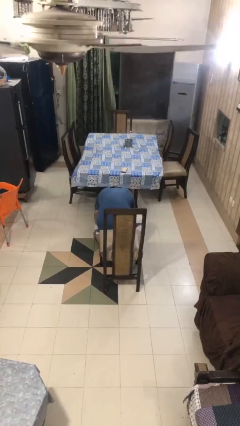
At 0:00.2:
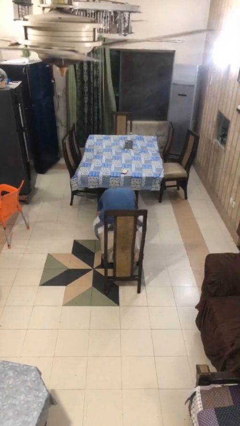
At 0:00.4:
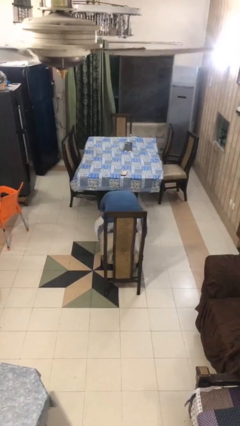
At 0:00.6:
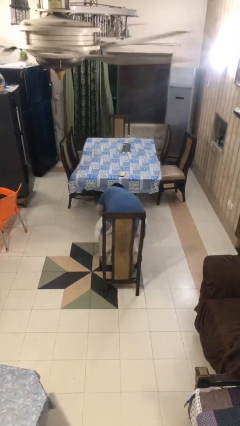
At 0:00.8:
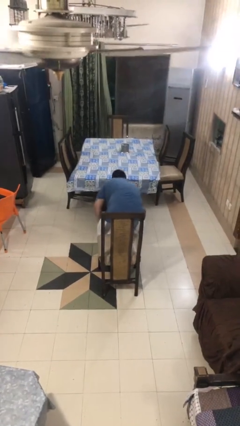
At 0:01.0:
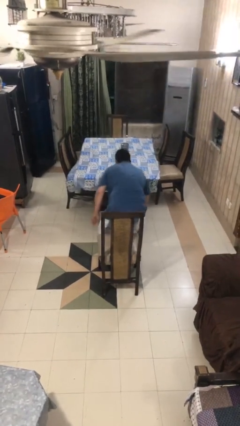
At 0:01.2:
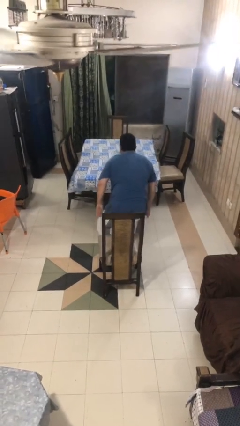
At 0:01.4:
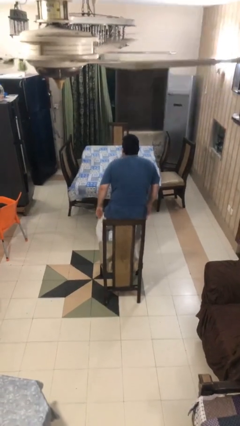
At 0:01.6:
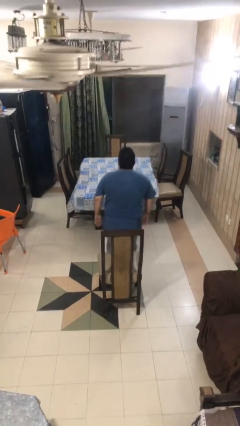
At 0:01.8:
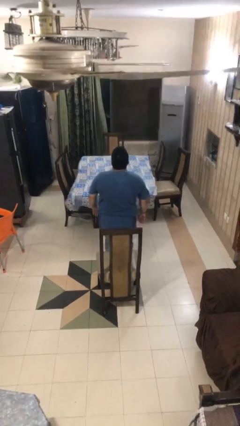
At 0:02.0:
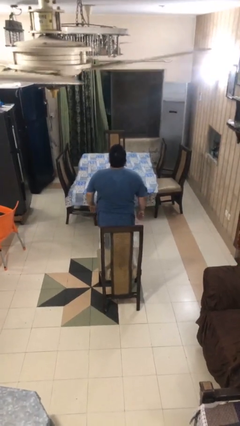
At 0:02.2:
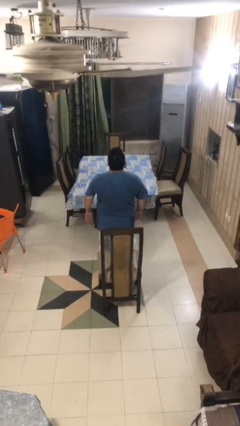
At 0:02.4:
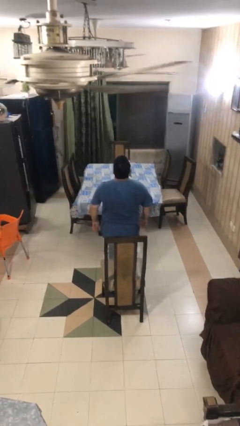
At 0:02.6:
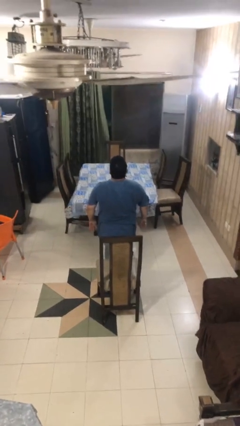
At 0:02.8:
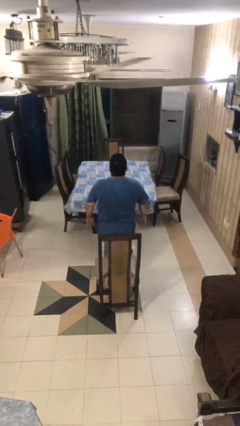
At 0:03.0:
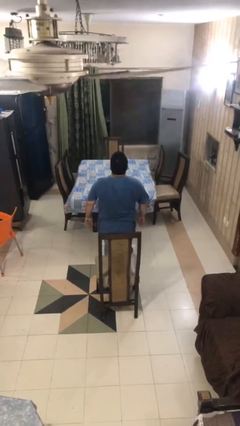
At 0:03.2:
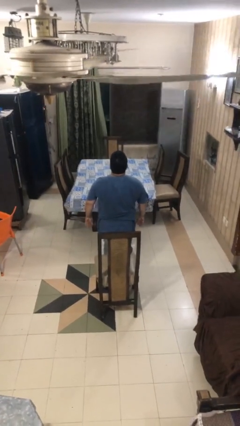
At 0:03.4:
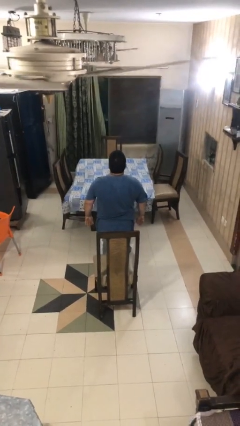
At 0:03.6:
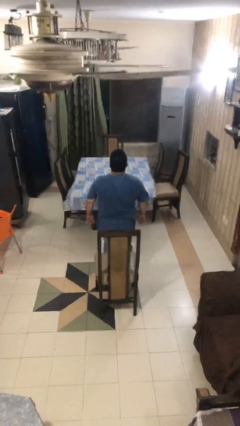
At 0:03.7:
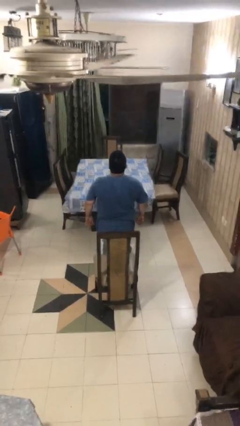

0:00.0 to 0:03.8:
person stands up from floor

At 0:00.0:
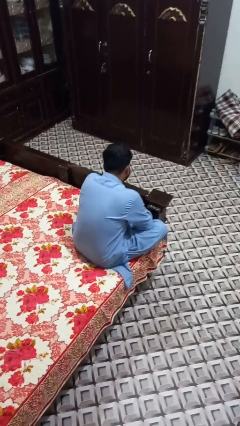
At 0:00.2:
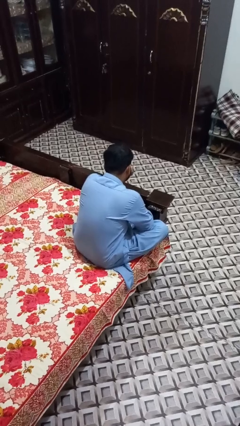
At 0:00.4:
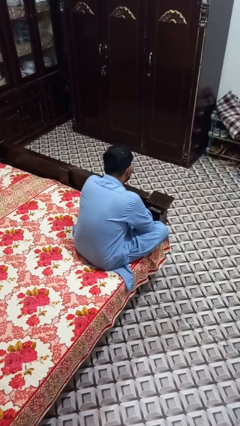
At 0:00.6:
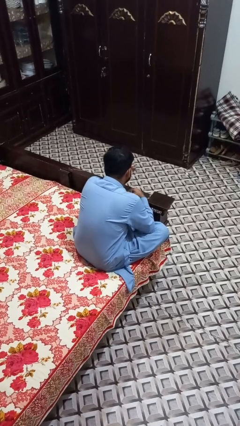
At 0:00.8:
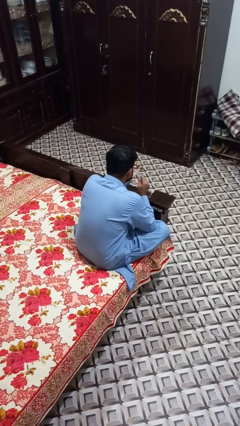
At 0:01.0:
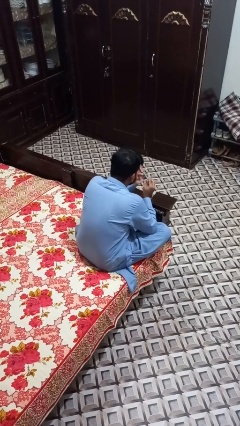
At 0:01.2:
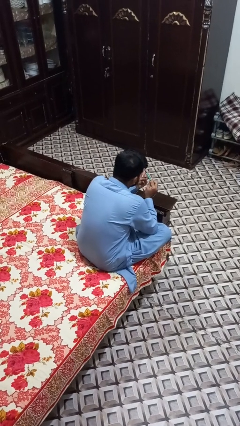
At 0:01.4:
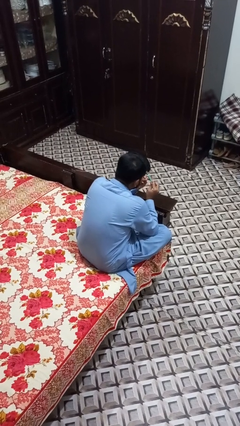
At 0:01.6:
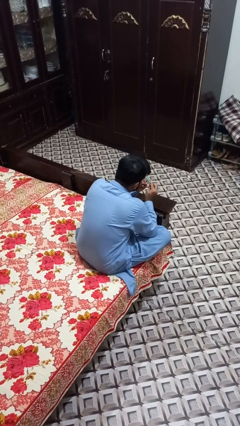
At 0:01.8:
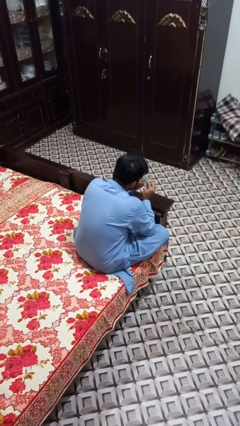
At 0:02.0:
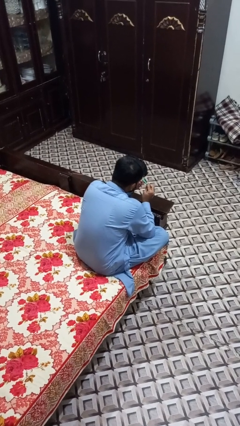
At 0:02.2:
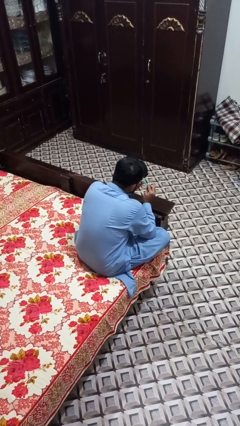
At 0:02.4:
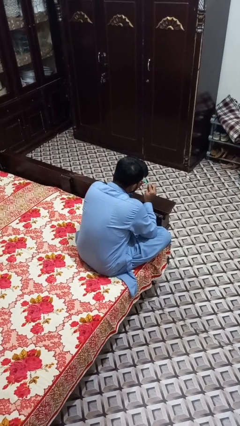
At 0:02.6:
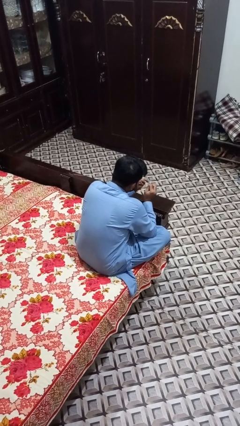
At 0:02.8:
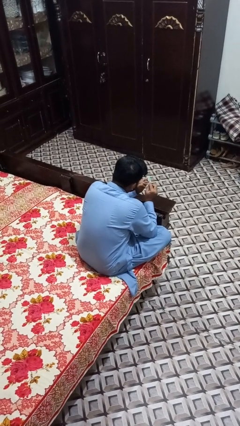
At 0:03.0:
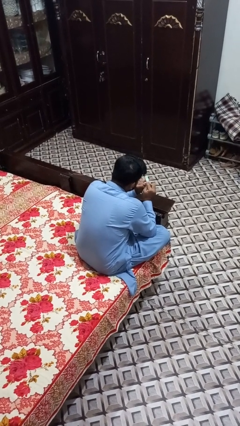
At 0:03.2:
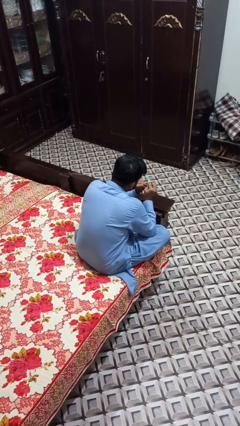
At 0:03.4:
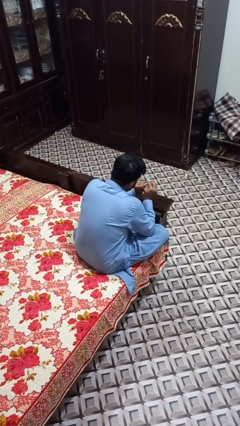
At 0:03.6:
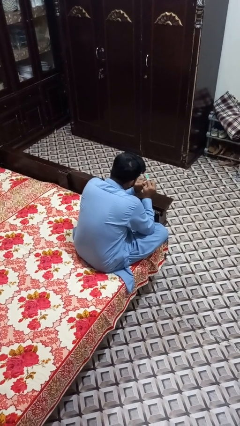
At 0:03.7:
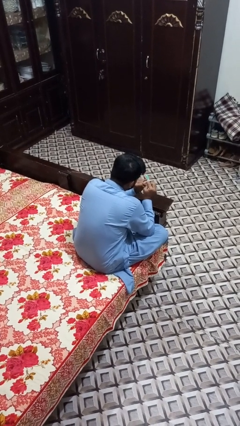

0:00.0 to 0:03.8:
person files fingernails

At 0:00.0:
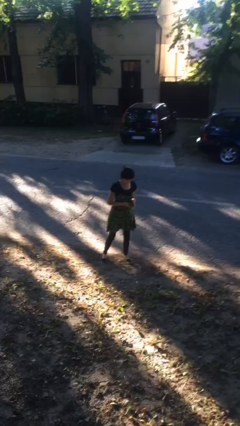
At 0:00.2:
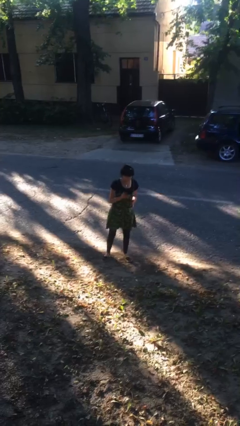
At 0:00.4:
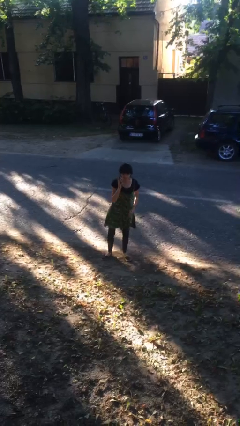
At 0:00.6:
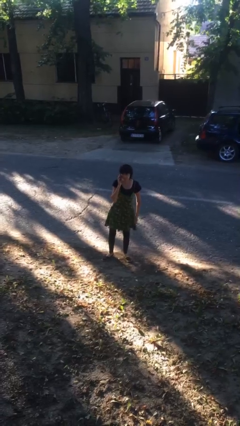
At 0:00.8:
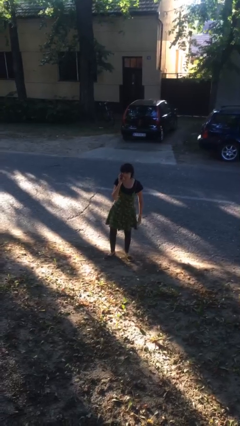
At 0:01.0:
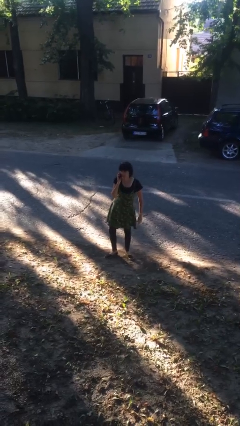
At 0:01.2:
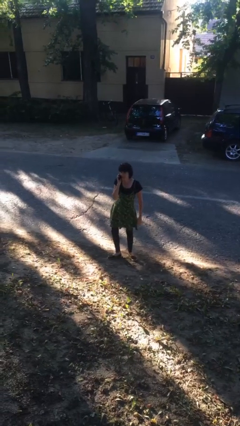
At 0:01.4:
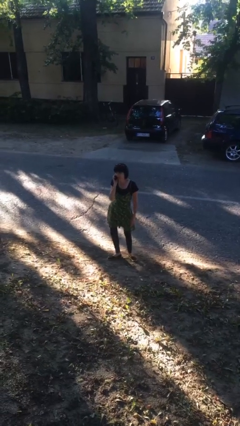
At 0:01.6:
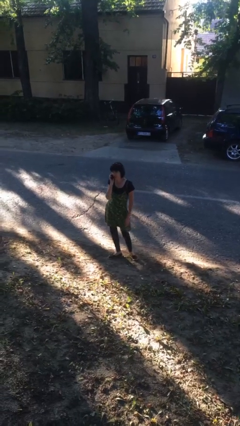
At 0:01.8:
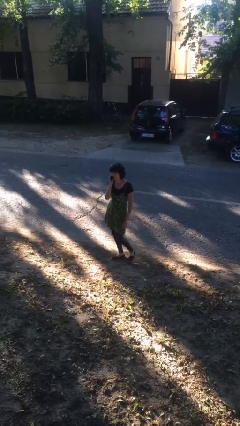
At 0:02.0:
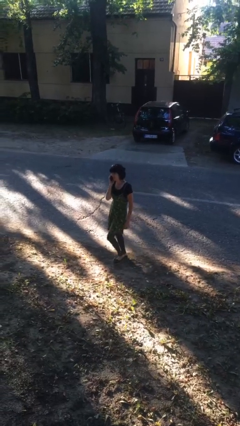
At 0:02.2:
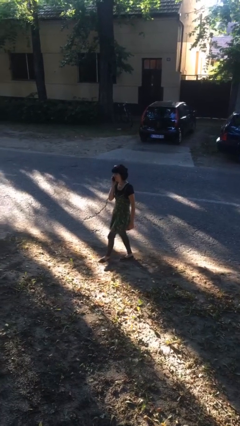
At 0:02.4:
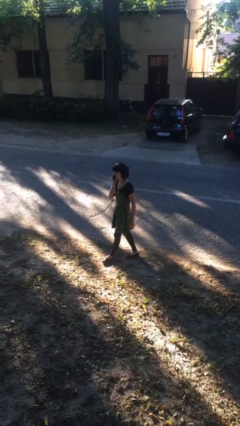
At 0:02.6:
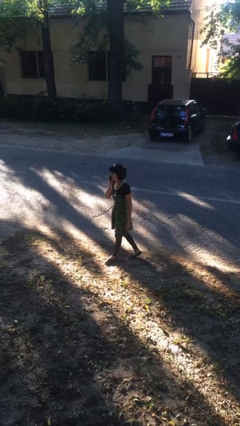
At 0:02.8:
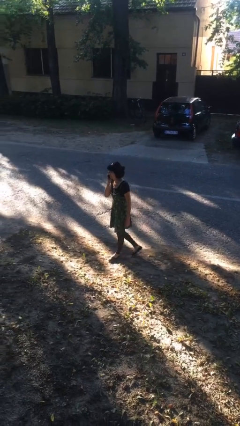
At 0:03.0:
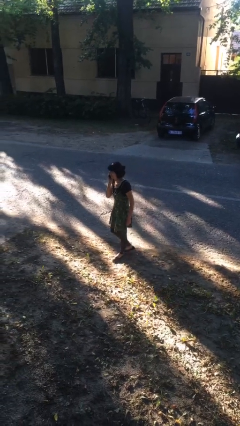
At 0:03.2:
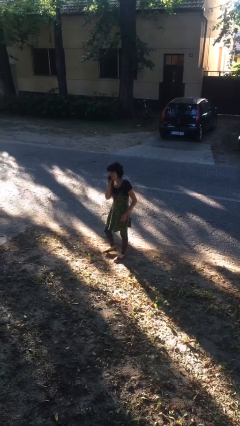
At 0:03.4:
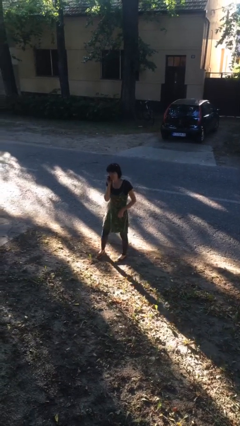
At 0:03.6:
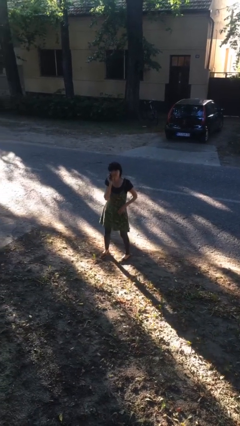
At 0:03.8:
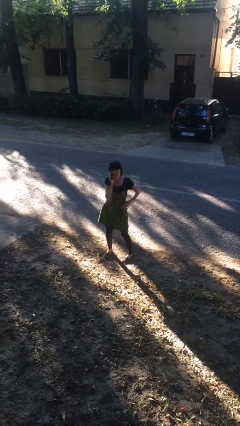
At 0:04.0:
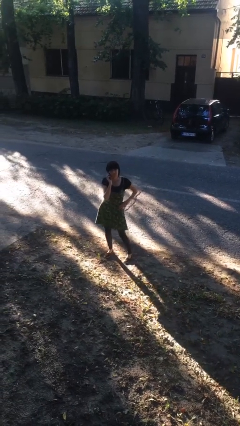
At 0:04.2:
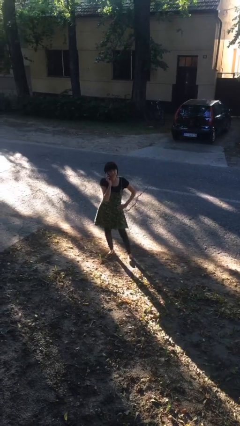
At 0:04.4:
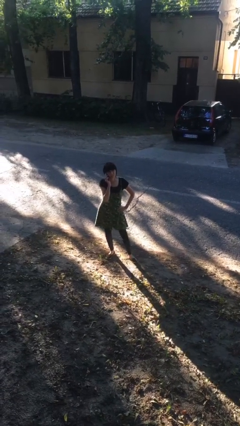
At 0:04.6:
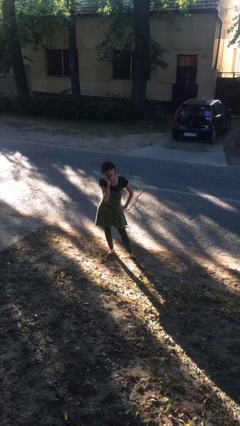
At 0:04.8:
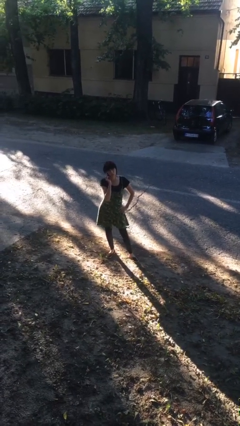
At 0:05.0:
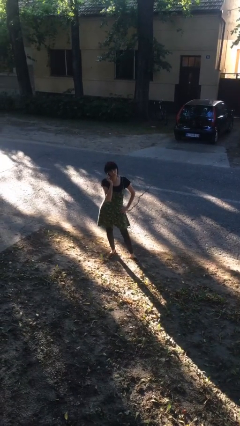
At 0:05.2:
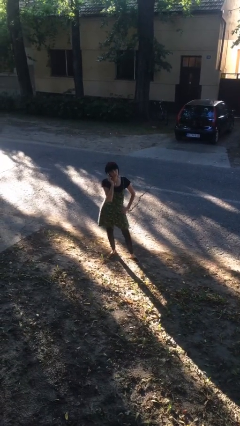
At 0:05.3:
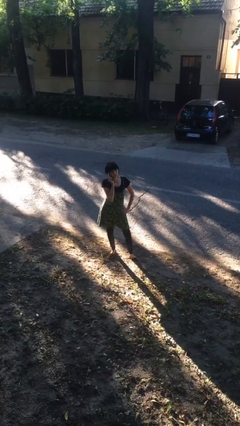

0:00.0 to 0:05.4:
person talks on phone

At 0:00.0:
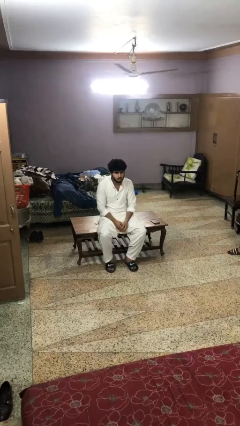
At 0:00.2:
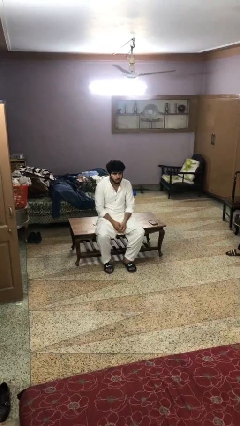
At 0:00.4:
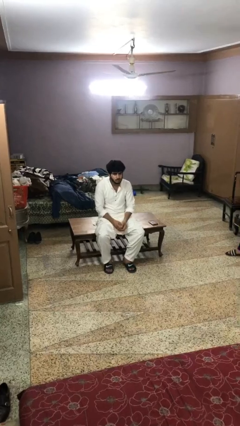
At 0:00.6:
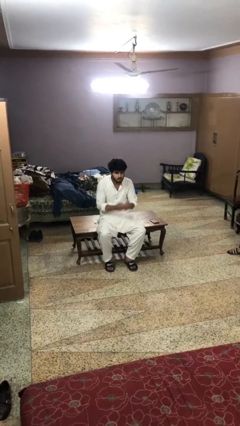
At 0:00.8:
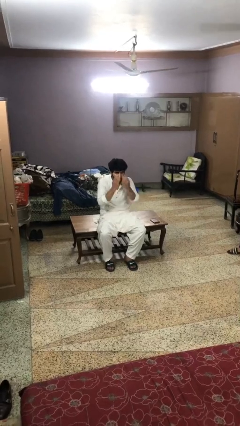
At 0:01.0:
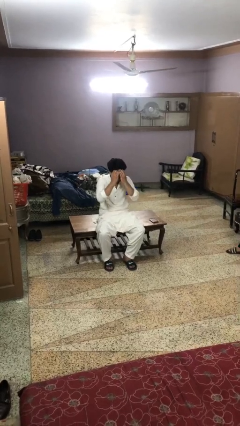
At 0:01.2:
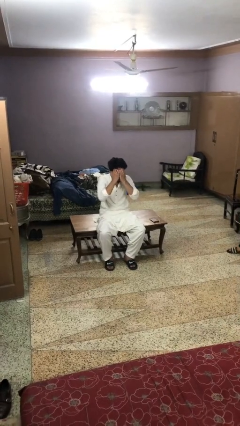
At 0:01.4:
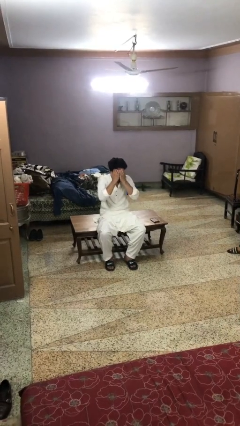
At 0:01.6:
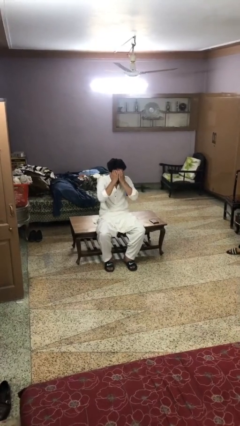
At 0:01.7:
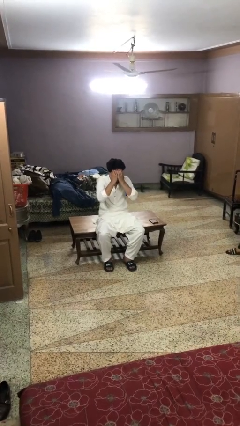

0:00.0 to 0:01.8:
person covers face with hands

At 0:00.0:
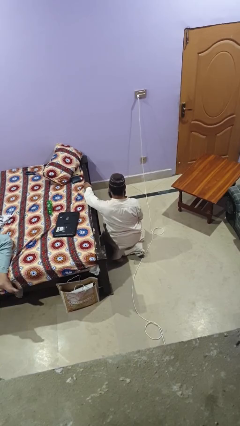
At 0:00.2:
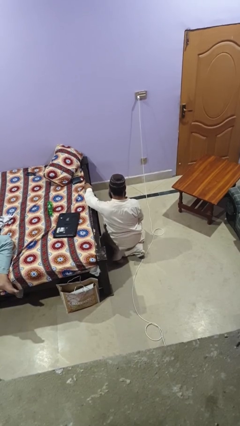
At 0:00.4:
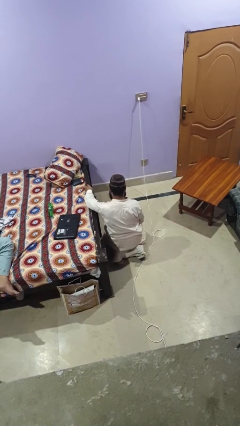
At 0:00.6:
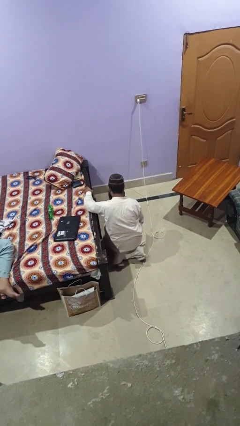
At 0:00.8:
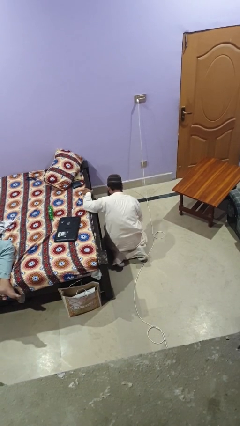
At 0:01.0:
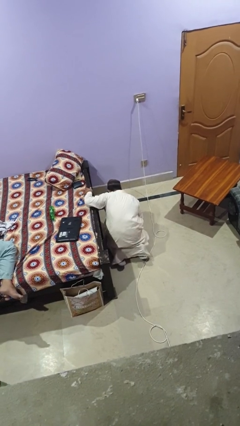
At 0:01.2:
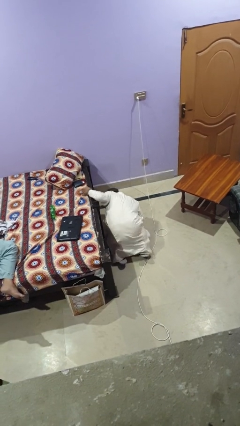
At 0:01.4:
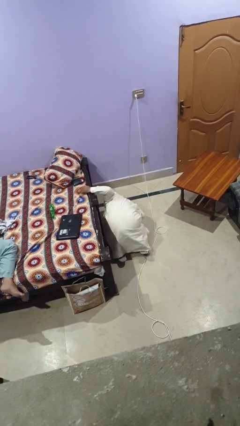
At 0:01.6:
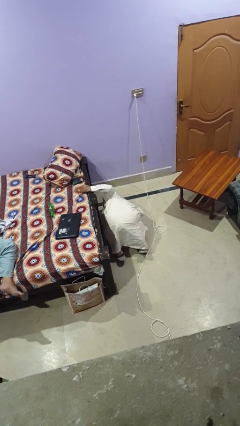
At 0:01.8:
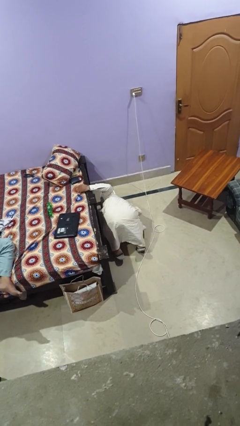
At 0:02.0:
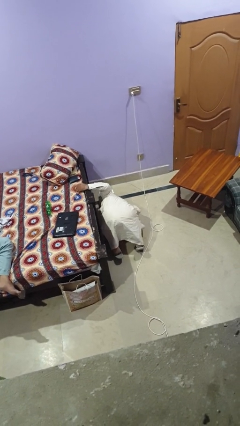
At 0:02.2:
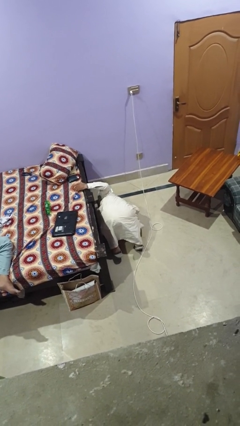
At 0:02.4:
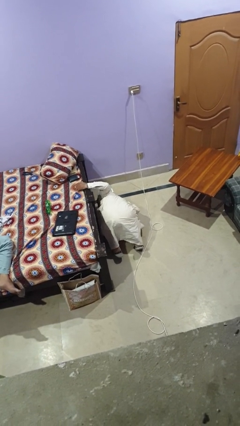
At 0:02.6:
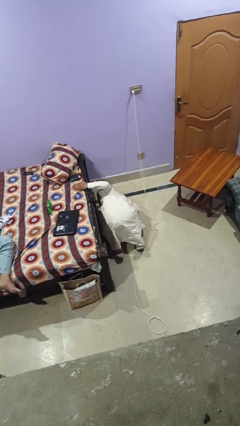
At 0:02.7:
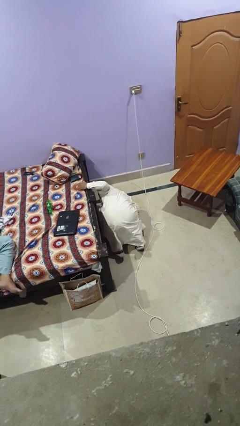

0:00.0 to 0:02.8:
person searches under bed
